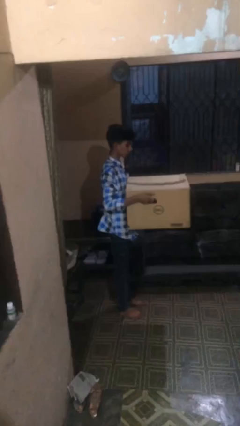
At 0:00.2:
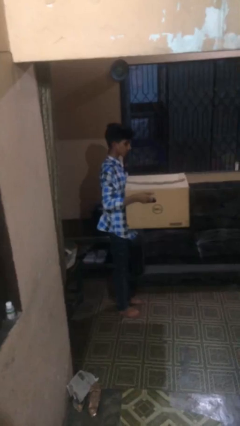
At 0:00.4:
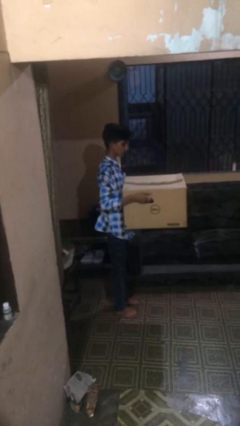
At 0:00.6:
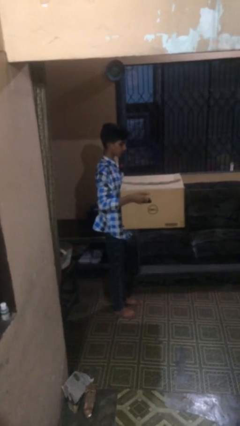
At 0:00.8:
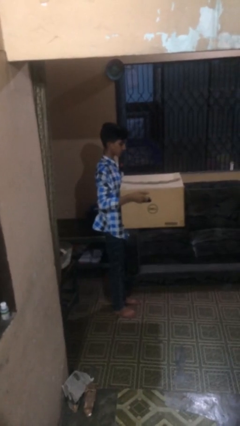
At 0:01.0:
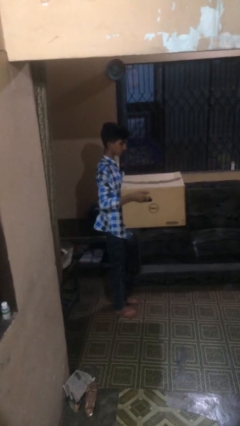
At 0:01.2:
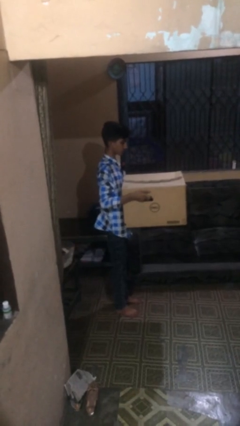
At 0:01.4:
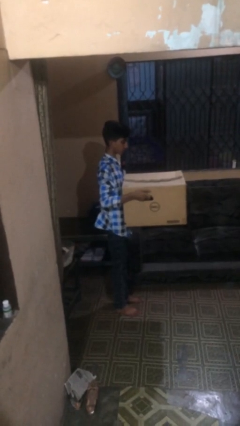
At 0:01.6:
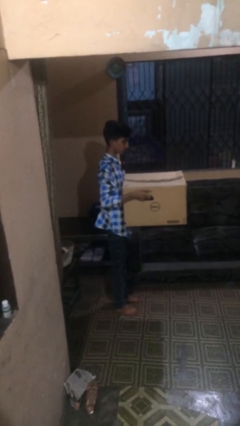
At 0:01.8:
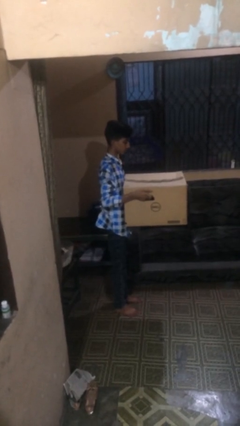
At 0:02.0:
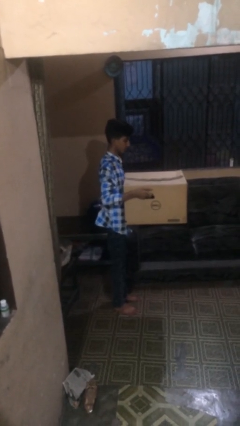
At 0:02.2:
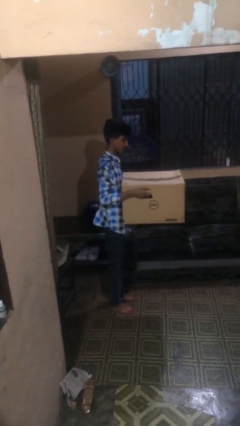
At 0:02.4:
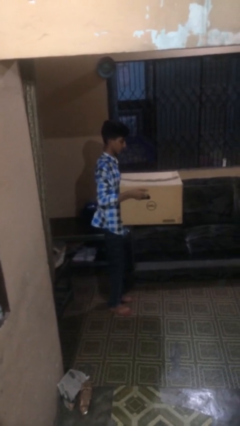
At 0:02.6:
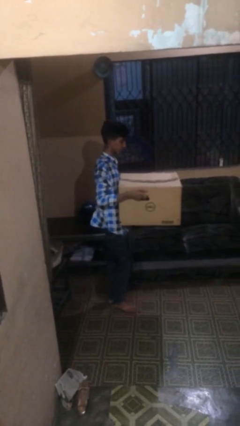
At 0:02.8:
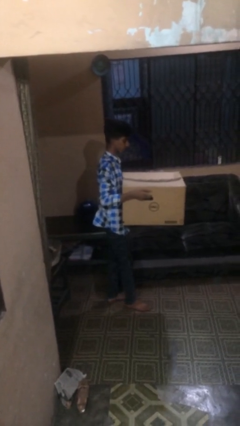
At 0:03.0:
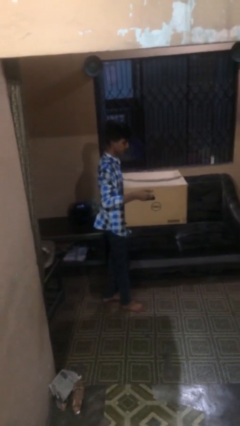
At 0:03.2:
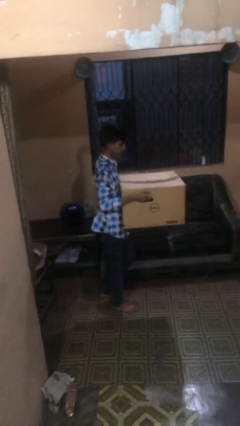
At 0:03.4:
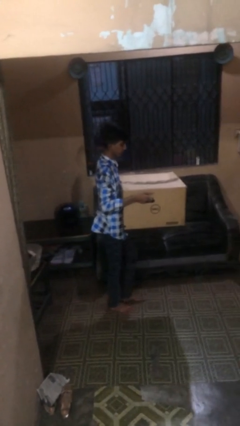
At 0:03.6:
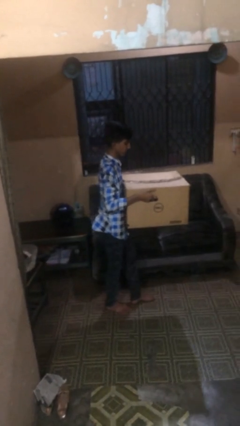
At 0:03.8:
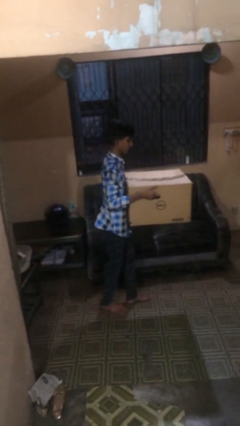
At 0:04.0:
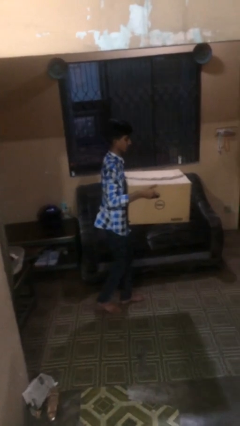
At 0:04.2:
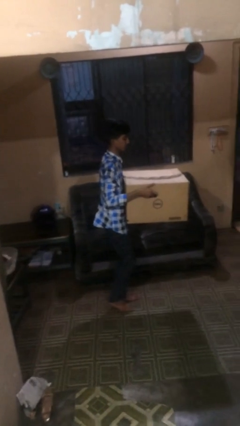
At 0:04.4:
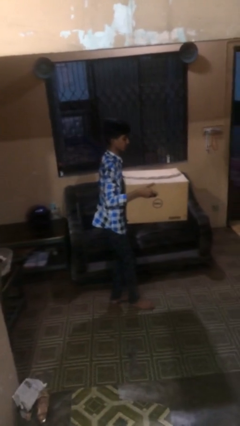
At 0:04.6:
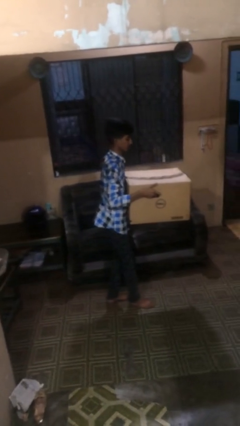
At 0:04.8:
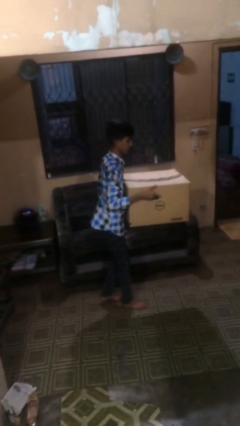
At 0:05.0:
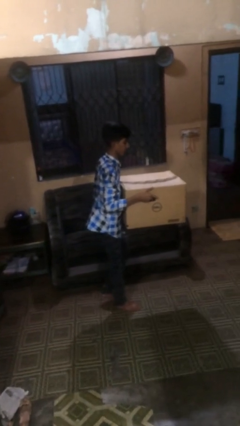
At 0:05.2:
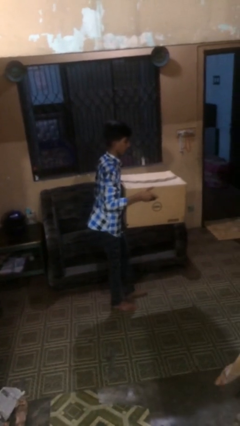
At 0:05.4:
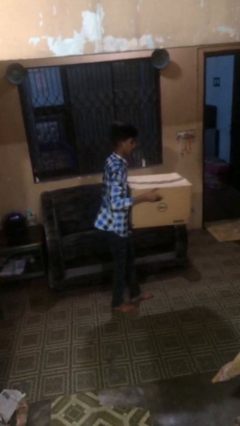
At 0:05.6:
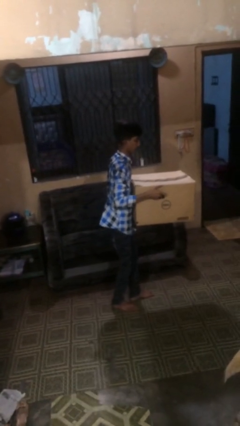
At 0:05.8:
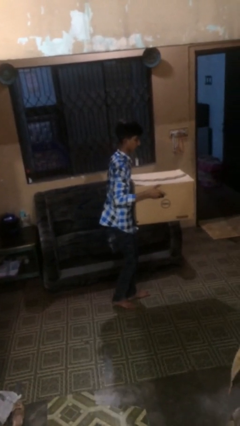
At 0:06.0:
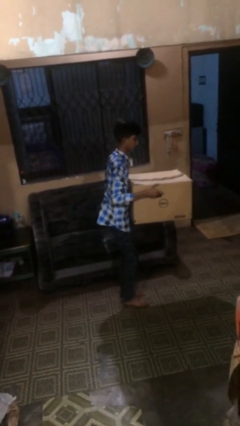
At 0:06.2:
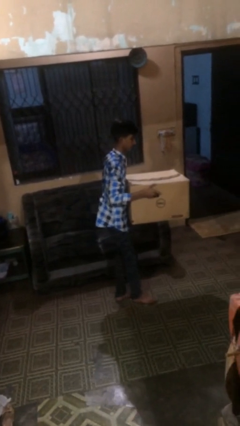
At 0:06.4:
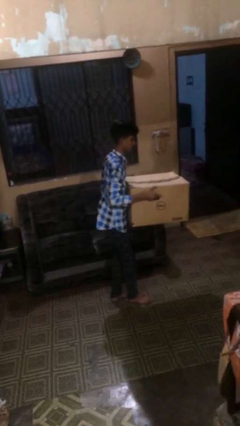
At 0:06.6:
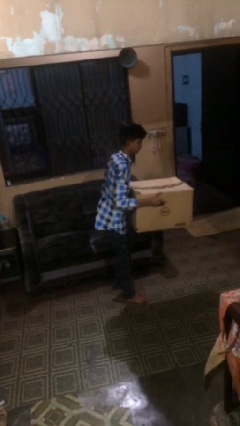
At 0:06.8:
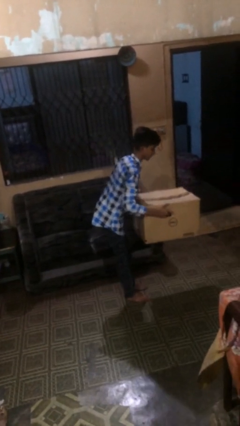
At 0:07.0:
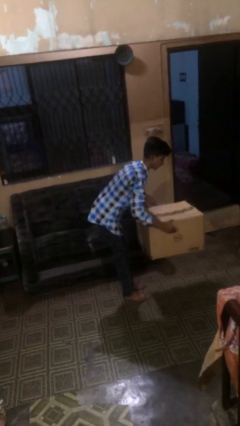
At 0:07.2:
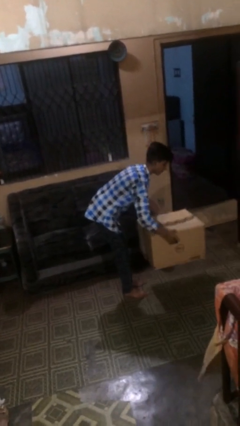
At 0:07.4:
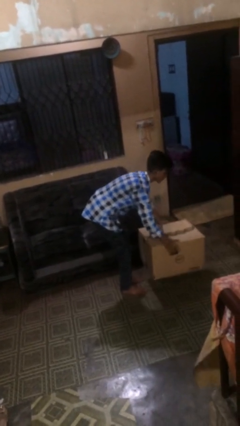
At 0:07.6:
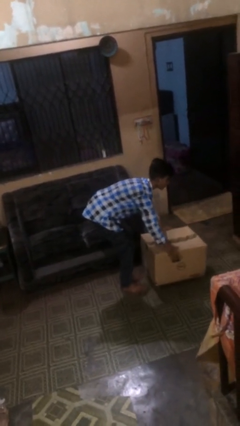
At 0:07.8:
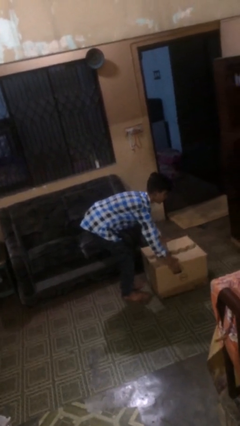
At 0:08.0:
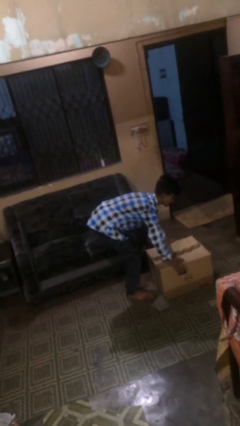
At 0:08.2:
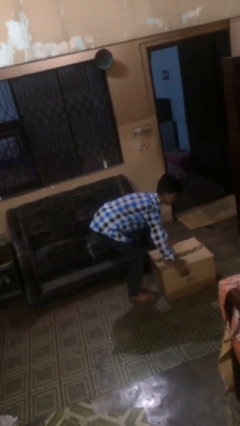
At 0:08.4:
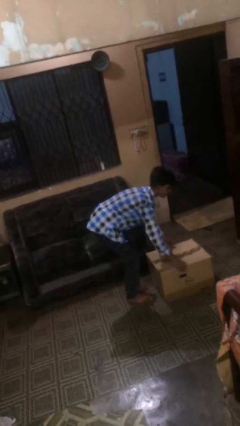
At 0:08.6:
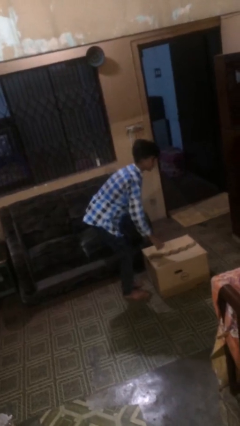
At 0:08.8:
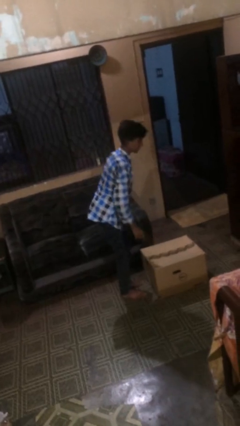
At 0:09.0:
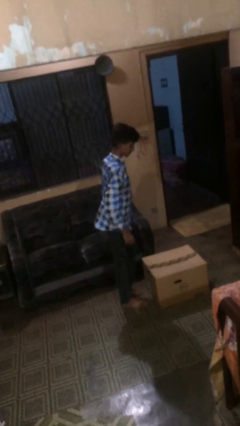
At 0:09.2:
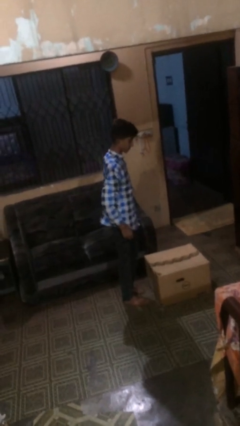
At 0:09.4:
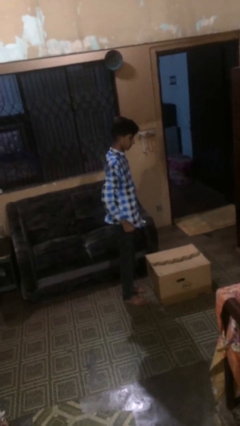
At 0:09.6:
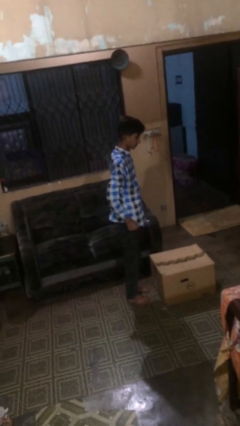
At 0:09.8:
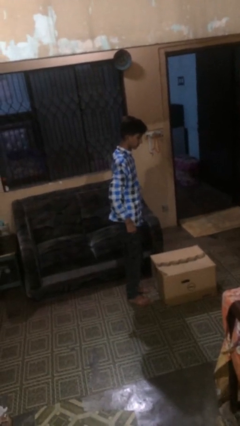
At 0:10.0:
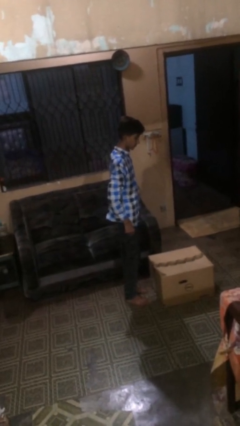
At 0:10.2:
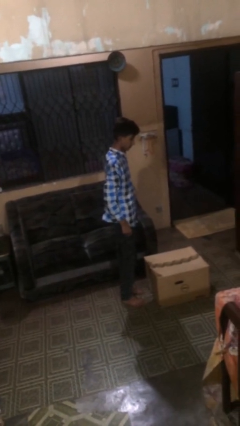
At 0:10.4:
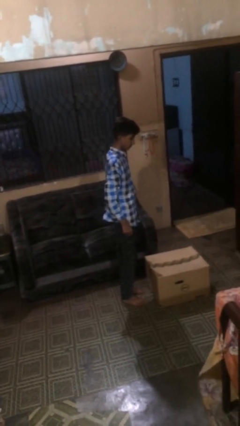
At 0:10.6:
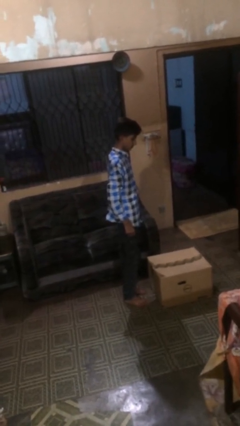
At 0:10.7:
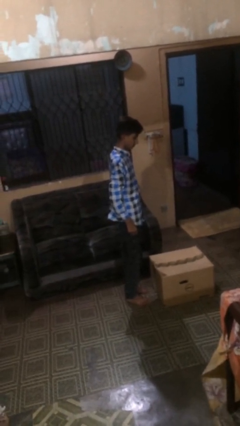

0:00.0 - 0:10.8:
person carries heavy object

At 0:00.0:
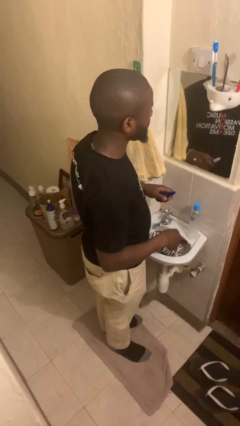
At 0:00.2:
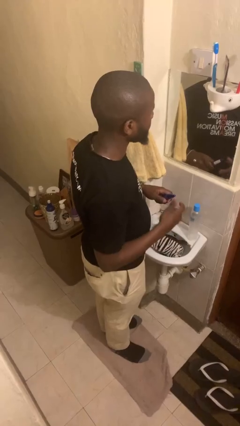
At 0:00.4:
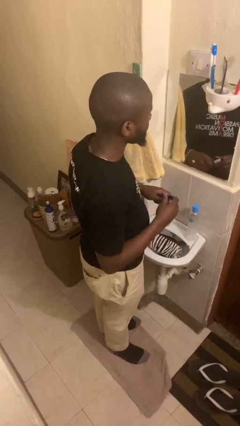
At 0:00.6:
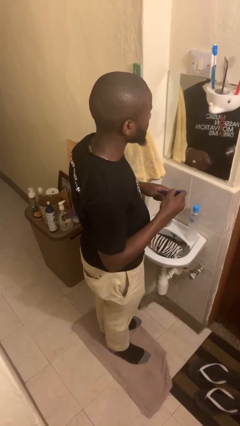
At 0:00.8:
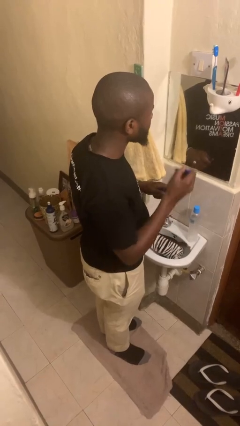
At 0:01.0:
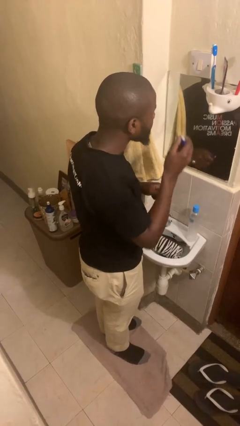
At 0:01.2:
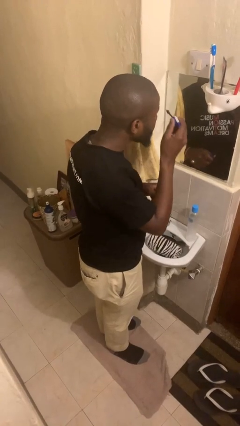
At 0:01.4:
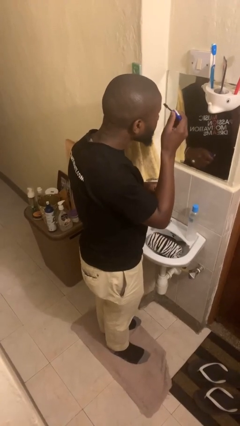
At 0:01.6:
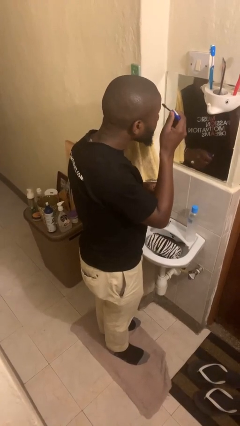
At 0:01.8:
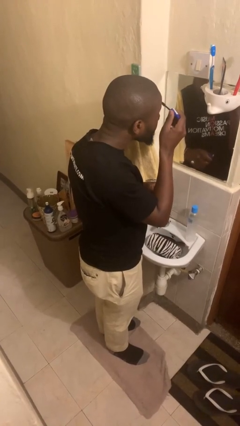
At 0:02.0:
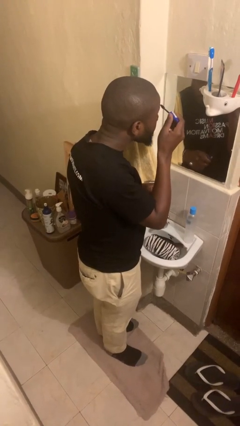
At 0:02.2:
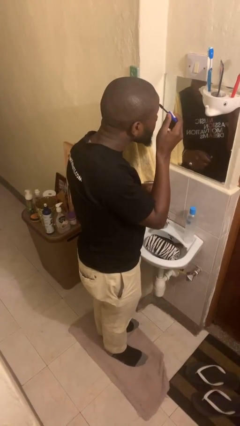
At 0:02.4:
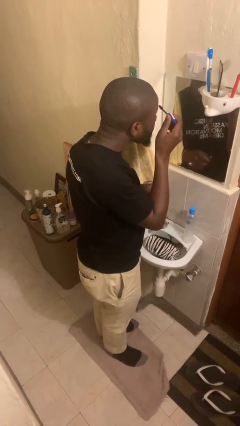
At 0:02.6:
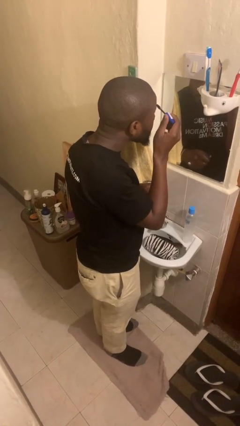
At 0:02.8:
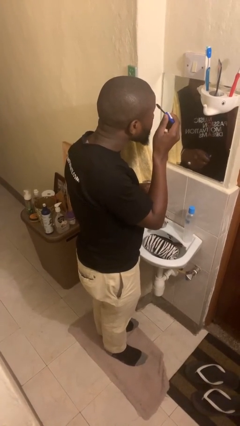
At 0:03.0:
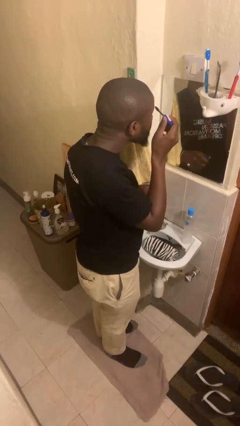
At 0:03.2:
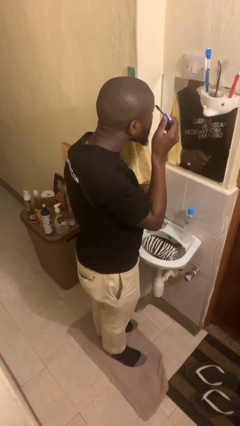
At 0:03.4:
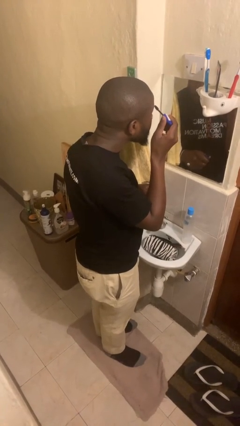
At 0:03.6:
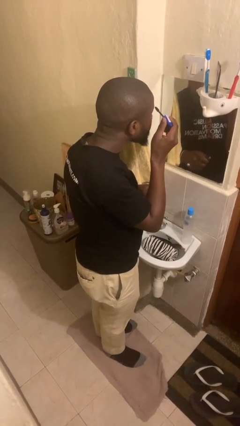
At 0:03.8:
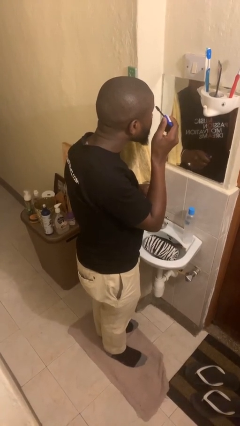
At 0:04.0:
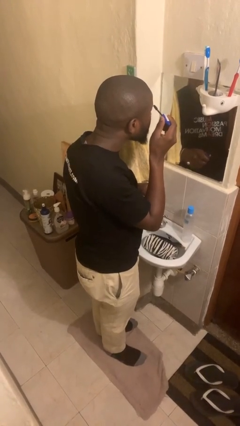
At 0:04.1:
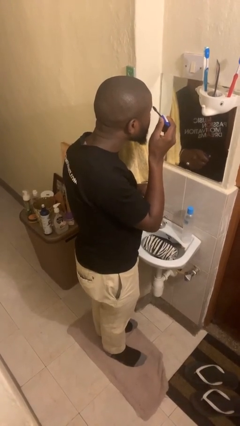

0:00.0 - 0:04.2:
person applies eye makeup

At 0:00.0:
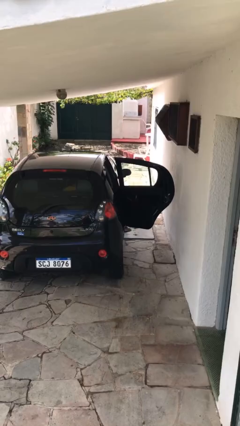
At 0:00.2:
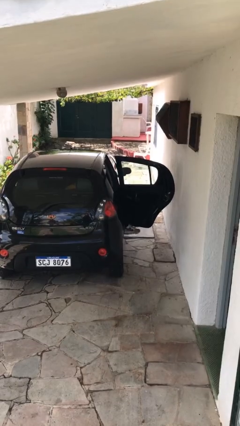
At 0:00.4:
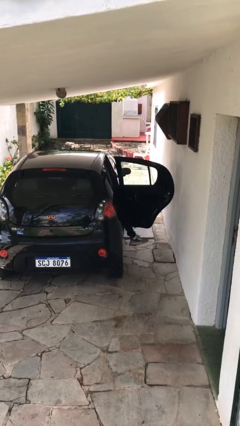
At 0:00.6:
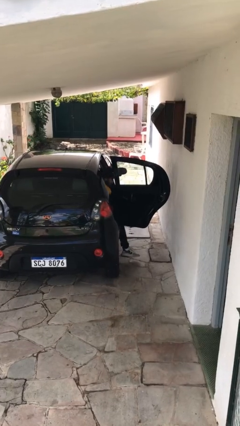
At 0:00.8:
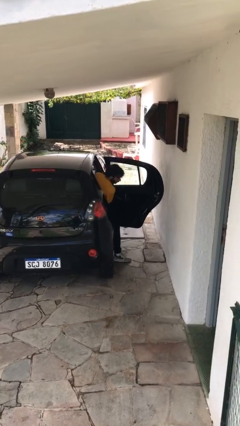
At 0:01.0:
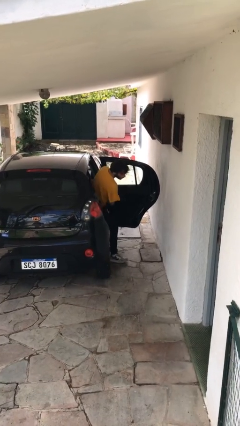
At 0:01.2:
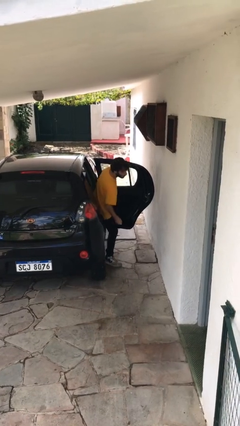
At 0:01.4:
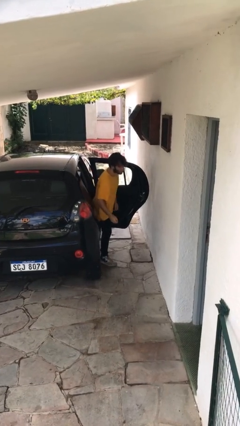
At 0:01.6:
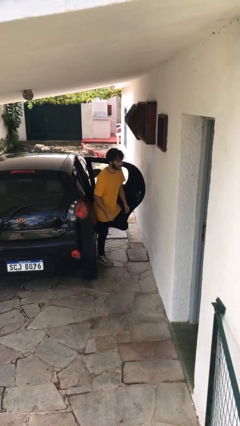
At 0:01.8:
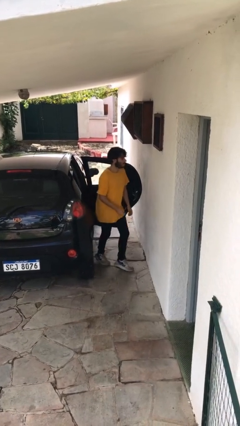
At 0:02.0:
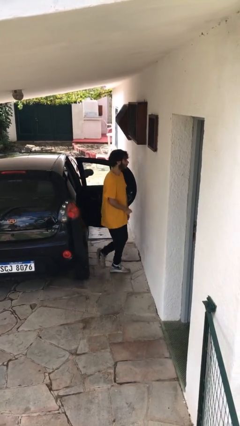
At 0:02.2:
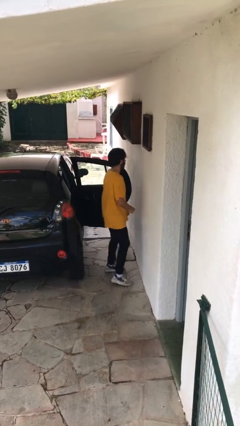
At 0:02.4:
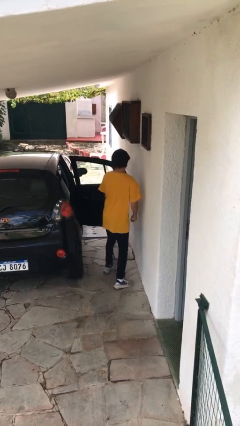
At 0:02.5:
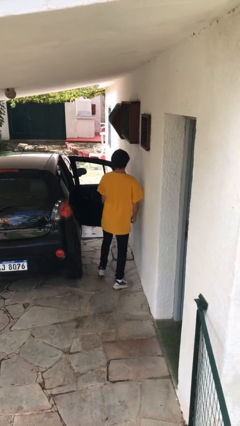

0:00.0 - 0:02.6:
person exits car

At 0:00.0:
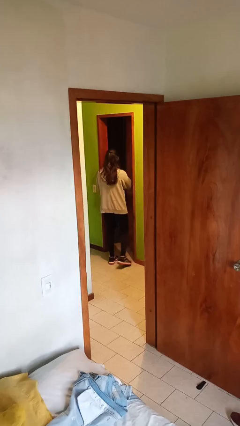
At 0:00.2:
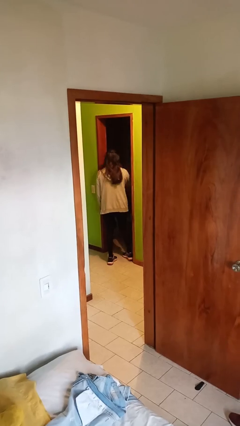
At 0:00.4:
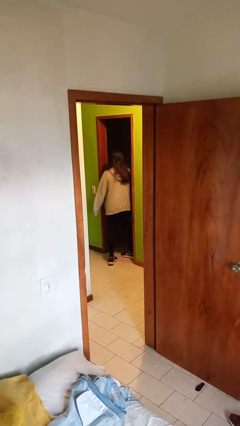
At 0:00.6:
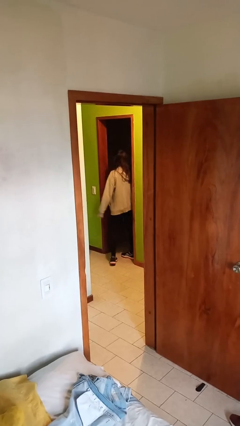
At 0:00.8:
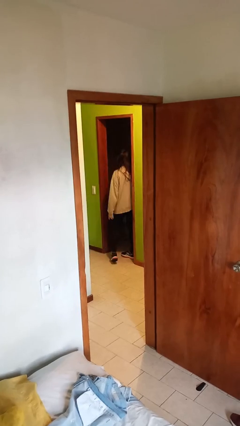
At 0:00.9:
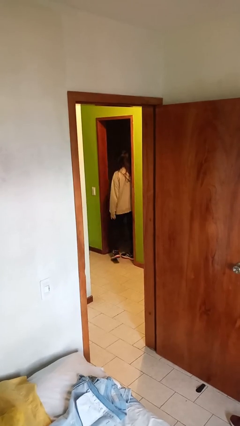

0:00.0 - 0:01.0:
person opens facility door
